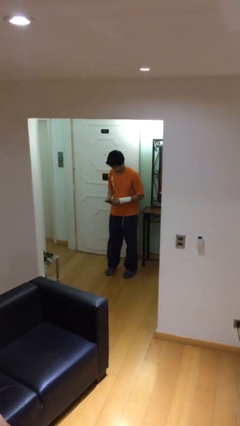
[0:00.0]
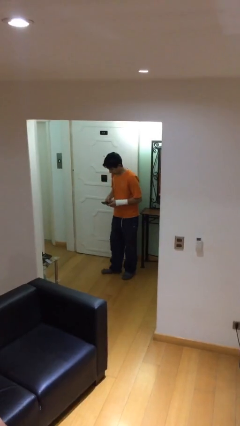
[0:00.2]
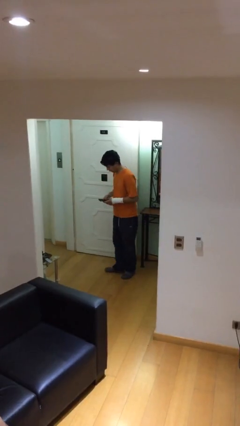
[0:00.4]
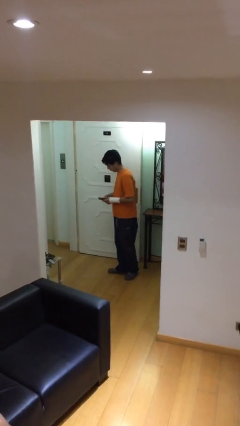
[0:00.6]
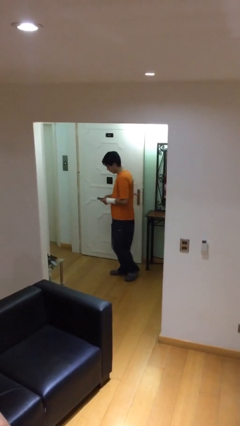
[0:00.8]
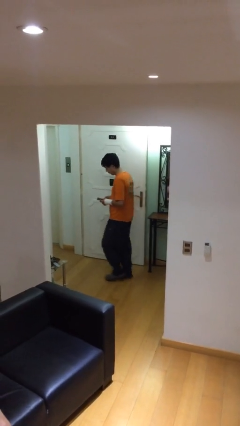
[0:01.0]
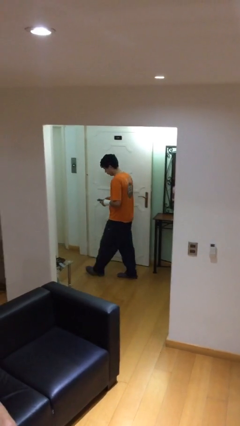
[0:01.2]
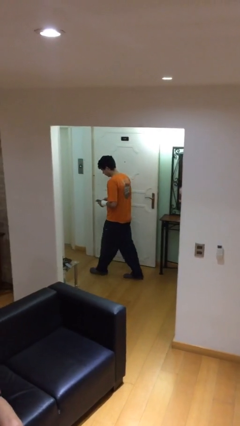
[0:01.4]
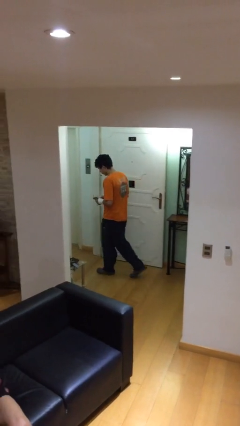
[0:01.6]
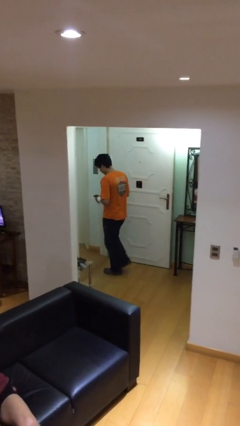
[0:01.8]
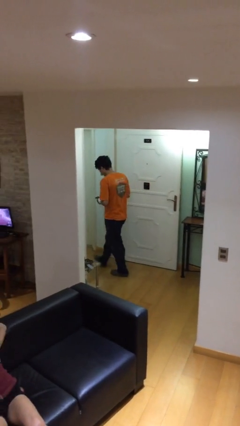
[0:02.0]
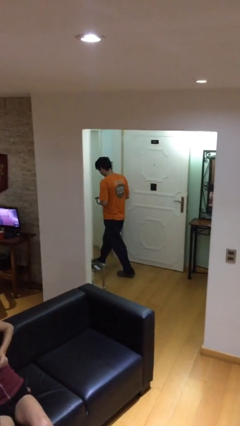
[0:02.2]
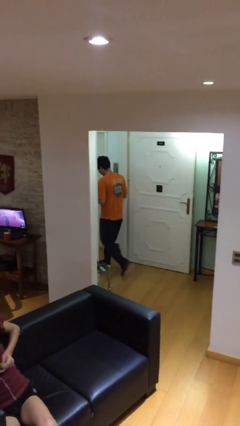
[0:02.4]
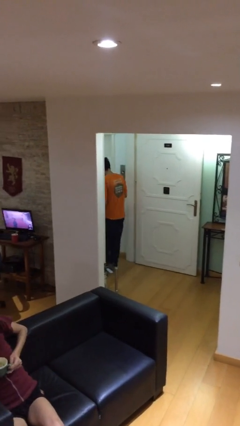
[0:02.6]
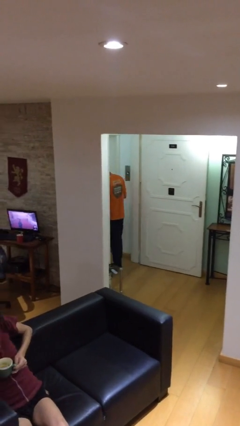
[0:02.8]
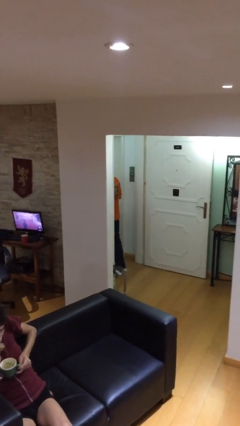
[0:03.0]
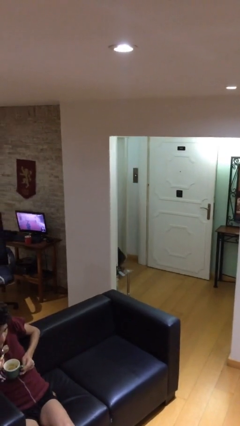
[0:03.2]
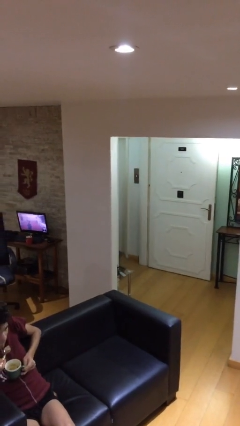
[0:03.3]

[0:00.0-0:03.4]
person exits scene through structure

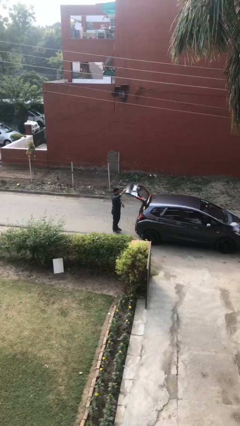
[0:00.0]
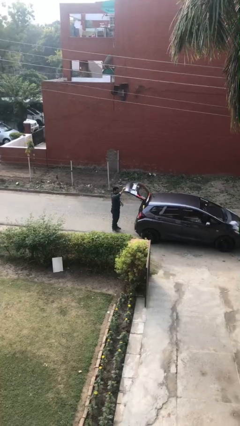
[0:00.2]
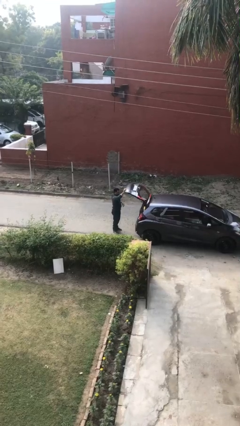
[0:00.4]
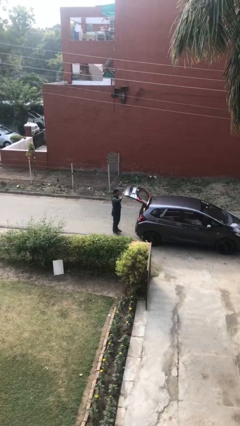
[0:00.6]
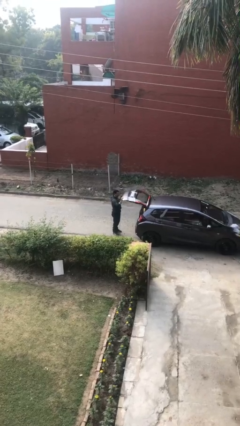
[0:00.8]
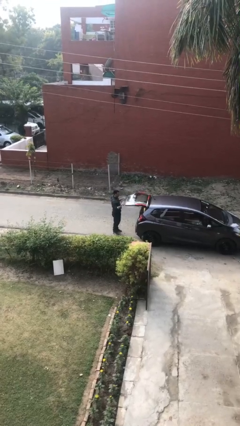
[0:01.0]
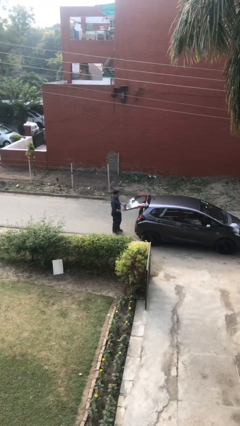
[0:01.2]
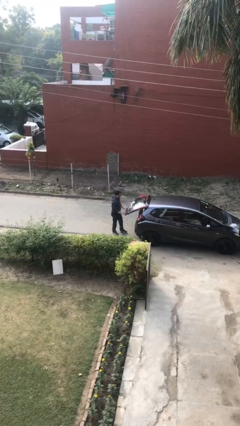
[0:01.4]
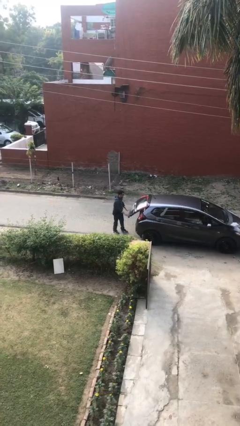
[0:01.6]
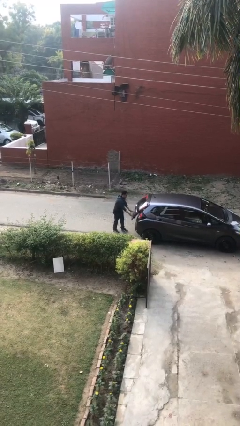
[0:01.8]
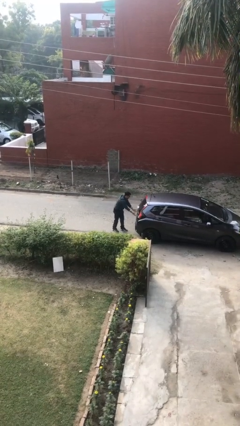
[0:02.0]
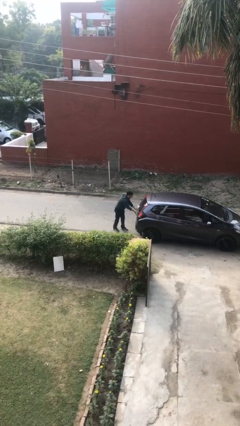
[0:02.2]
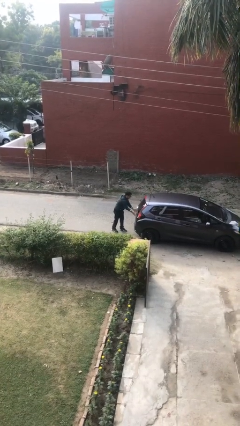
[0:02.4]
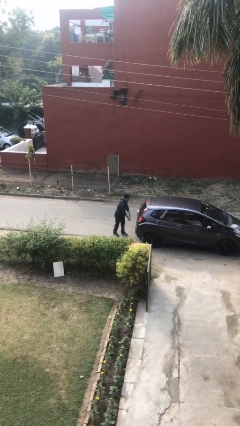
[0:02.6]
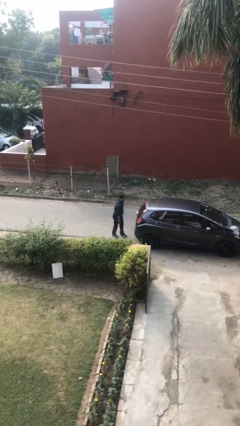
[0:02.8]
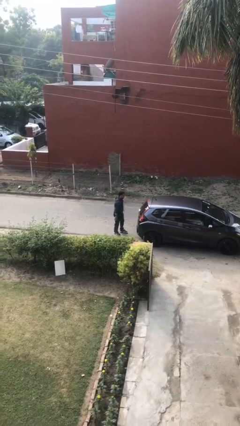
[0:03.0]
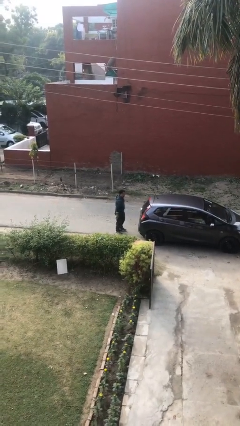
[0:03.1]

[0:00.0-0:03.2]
person closes car trunk

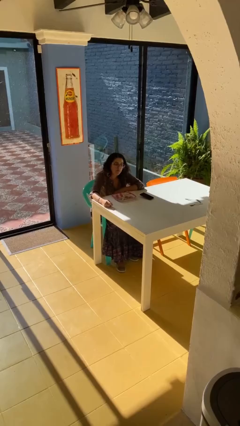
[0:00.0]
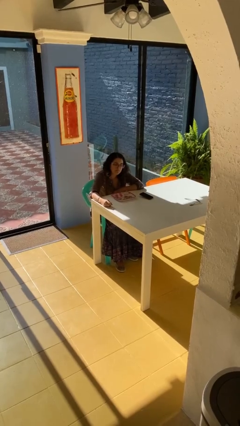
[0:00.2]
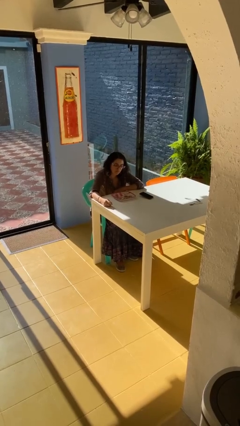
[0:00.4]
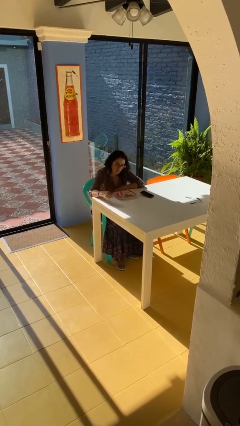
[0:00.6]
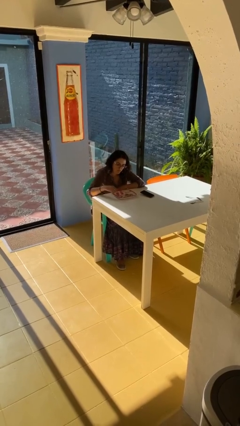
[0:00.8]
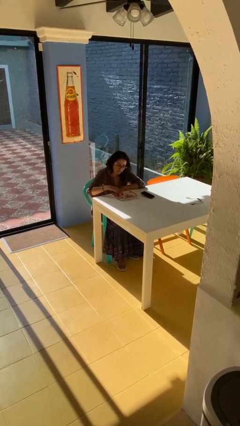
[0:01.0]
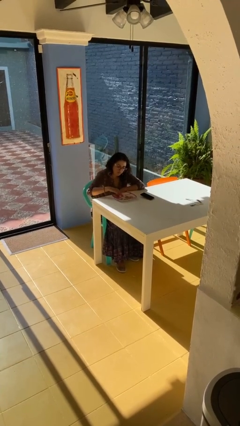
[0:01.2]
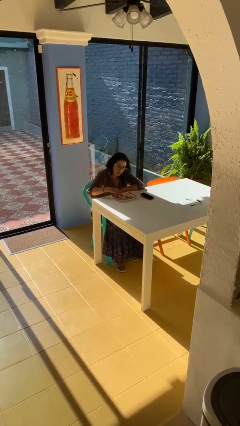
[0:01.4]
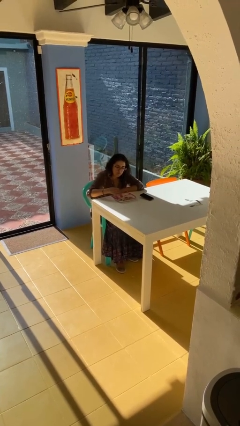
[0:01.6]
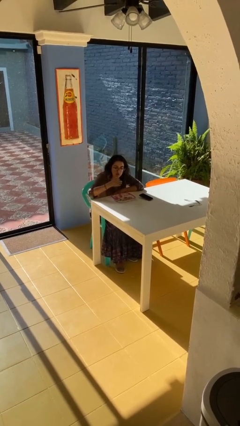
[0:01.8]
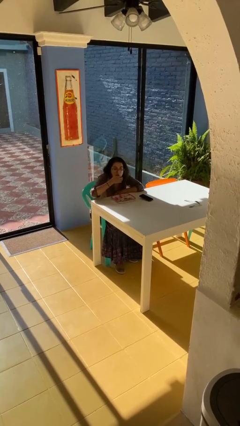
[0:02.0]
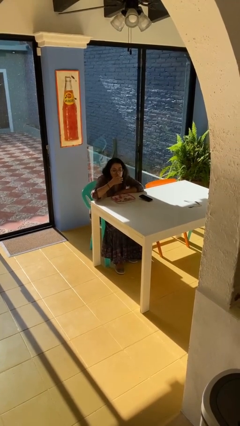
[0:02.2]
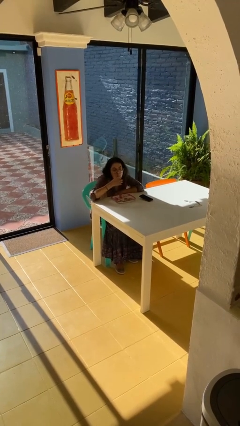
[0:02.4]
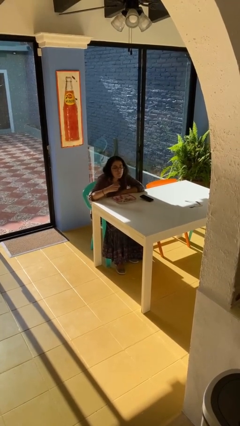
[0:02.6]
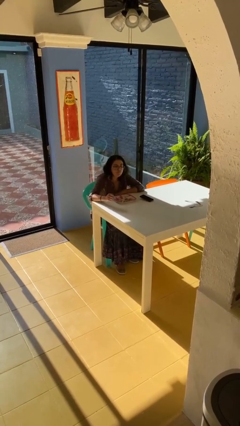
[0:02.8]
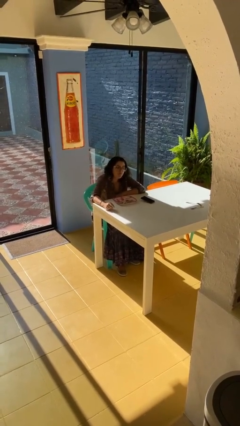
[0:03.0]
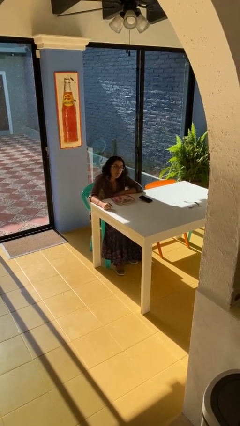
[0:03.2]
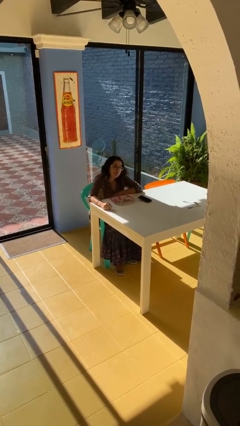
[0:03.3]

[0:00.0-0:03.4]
person eats with hands

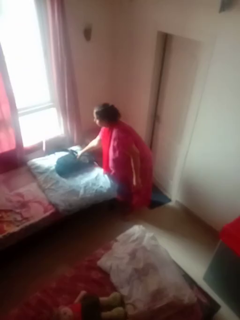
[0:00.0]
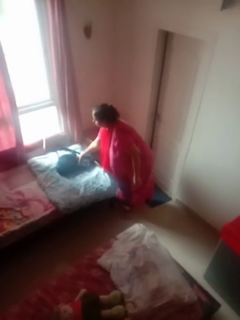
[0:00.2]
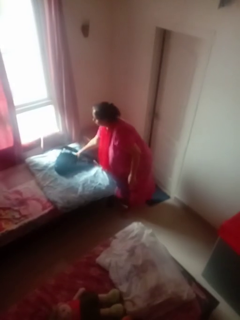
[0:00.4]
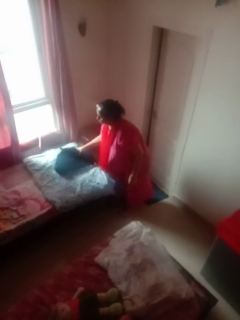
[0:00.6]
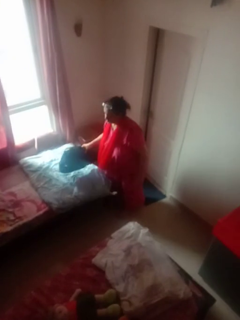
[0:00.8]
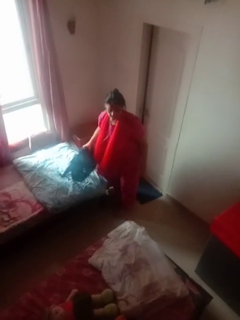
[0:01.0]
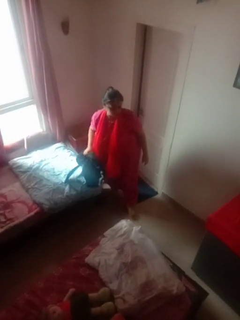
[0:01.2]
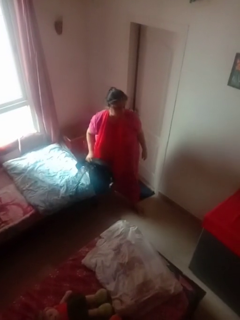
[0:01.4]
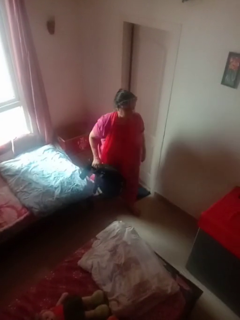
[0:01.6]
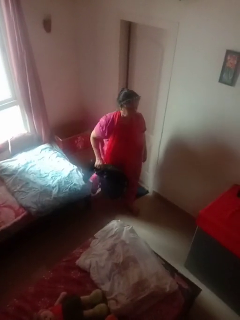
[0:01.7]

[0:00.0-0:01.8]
person picks up object from bed

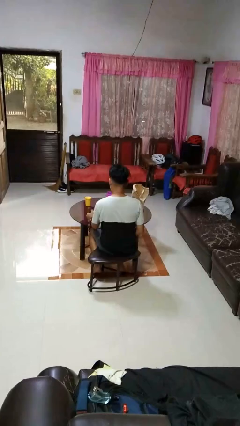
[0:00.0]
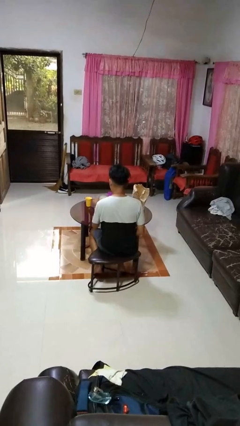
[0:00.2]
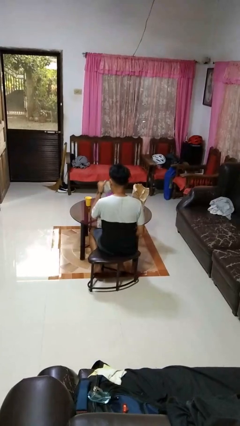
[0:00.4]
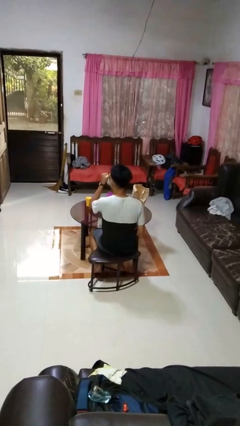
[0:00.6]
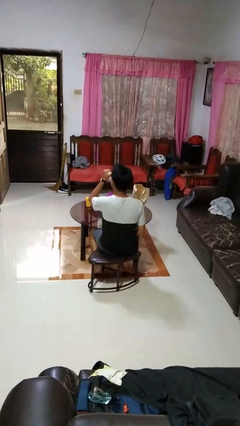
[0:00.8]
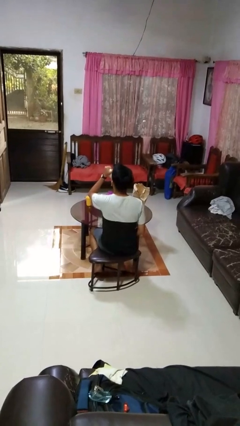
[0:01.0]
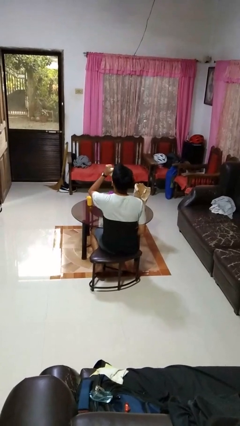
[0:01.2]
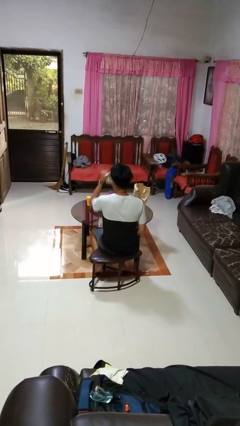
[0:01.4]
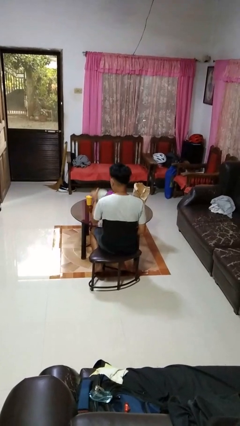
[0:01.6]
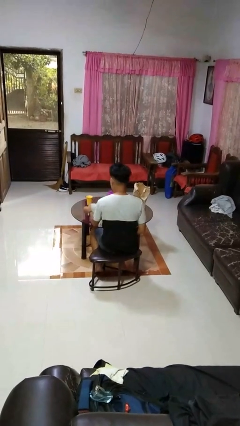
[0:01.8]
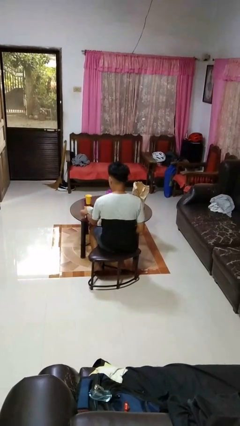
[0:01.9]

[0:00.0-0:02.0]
person drinks from mug

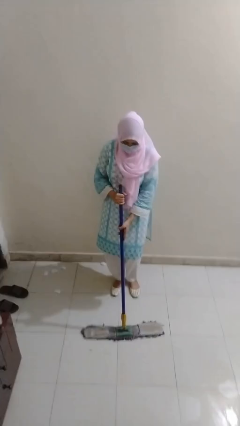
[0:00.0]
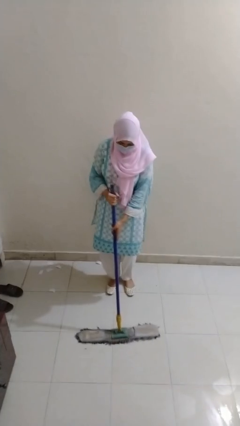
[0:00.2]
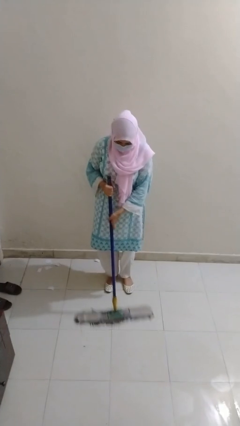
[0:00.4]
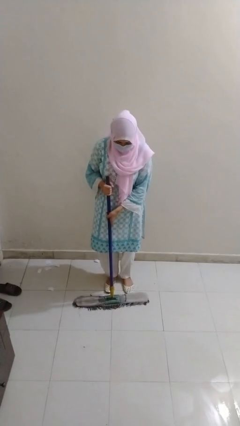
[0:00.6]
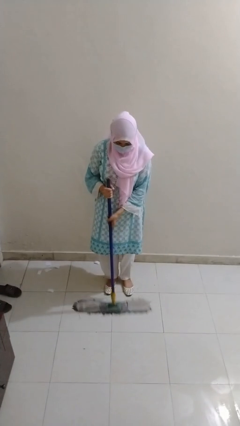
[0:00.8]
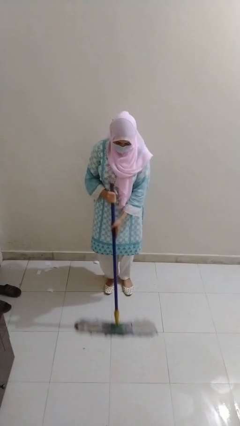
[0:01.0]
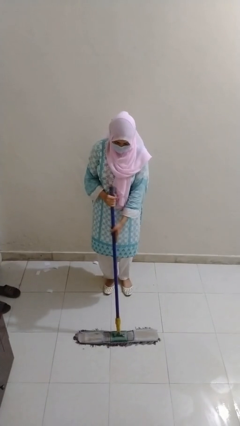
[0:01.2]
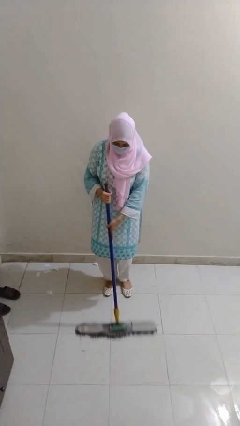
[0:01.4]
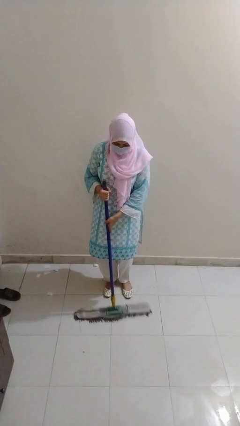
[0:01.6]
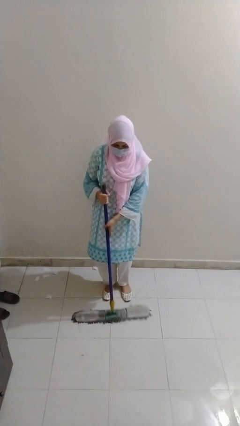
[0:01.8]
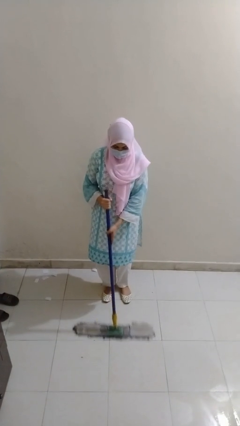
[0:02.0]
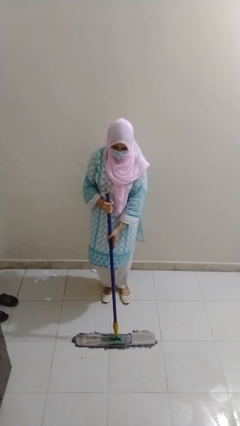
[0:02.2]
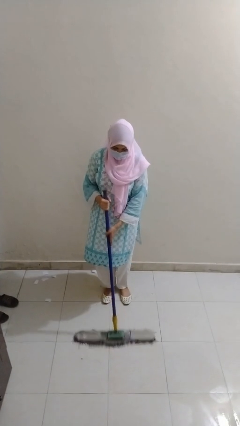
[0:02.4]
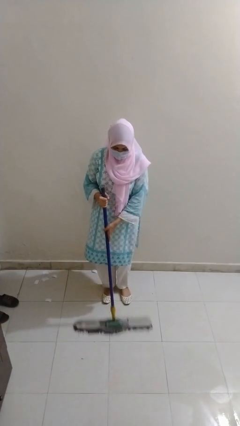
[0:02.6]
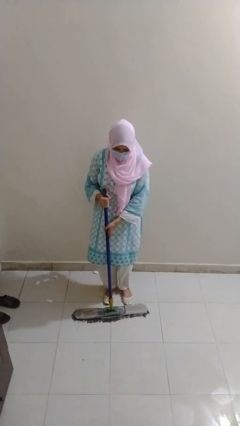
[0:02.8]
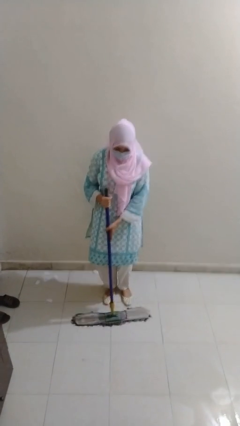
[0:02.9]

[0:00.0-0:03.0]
person mops

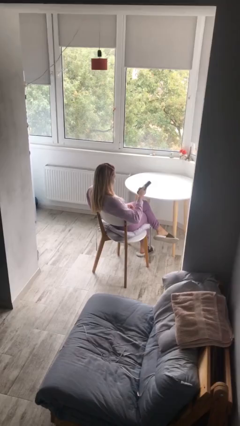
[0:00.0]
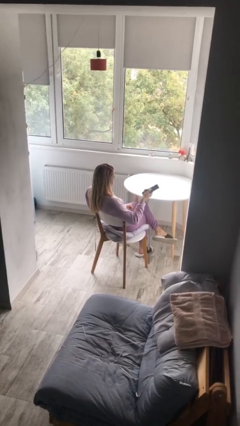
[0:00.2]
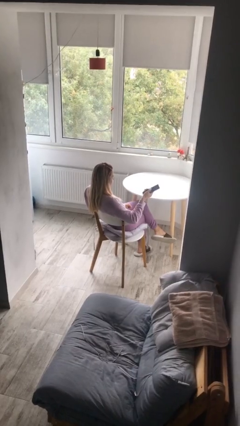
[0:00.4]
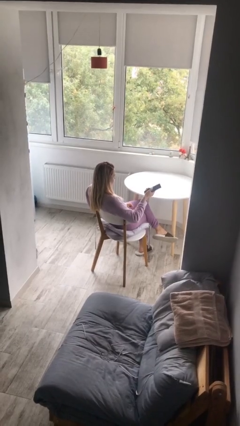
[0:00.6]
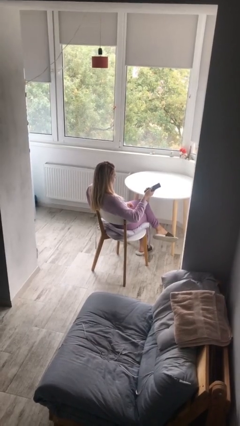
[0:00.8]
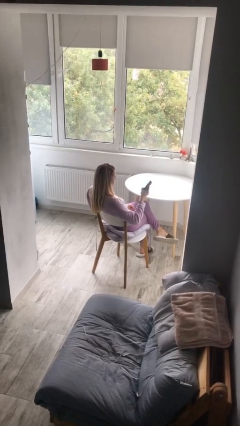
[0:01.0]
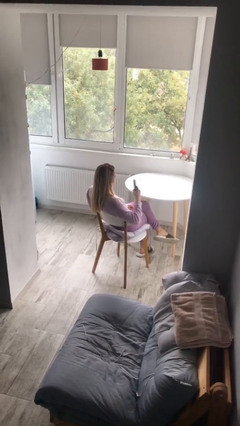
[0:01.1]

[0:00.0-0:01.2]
person uses television remote
